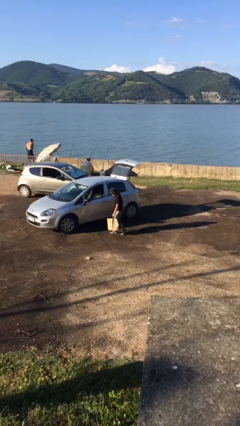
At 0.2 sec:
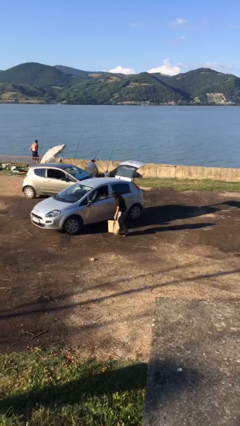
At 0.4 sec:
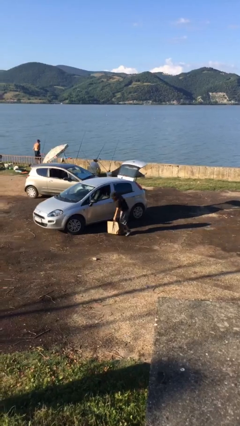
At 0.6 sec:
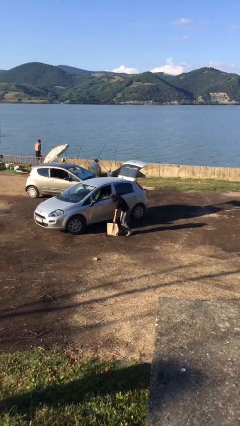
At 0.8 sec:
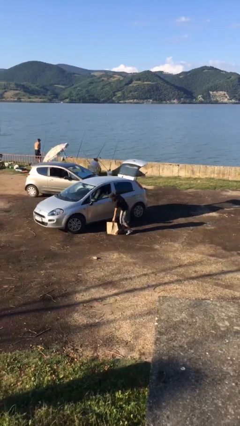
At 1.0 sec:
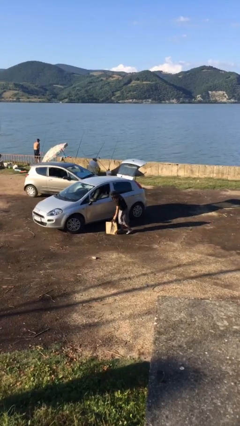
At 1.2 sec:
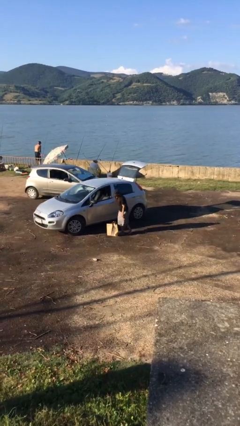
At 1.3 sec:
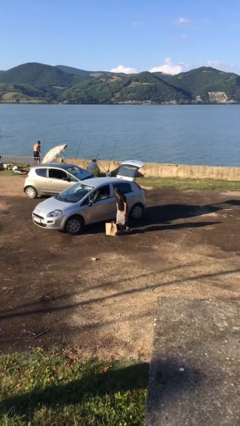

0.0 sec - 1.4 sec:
person puts down object on floor

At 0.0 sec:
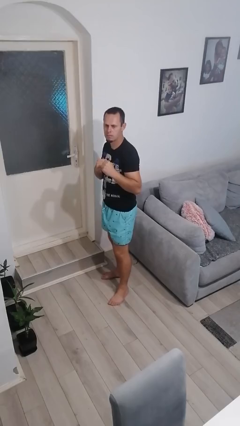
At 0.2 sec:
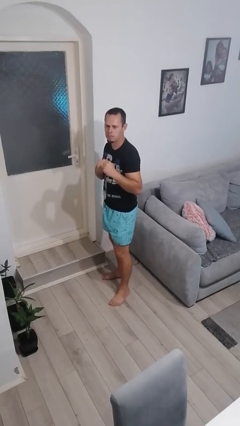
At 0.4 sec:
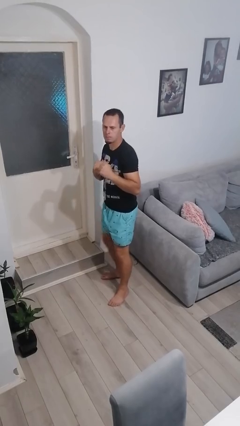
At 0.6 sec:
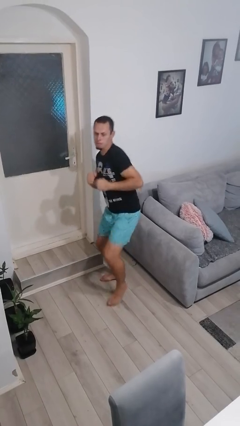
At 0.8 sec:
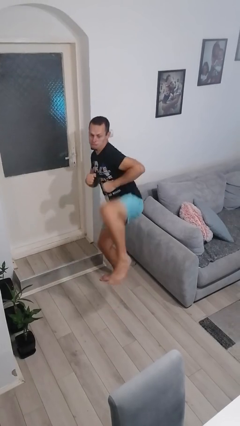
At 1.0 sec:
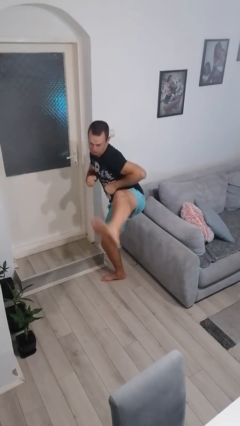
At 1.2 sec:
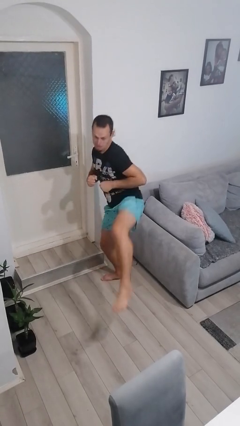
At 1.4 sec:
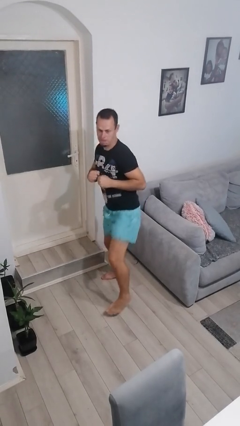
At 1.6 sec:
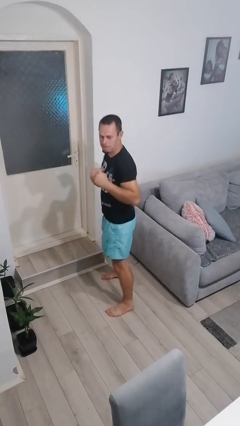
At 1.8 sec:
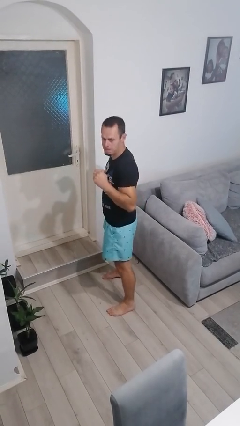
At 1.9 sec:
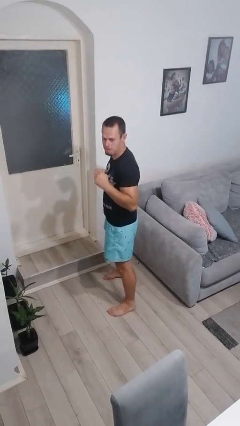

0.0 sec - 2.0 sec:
person karate kicks

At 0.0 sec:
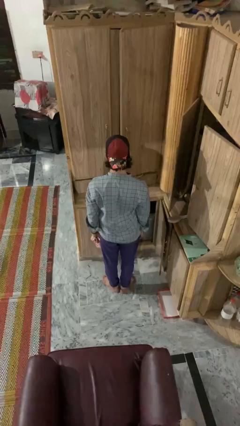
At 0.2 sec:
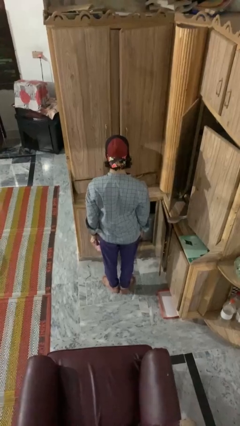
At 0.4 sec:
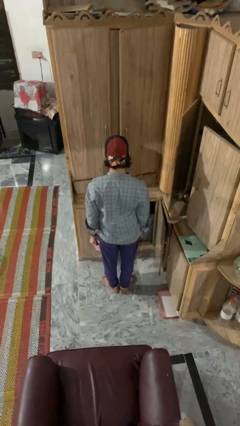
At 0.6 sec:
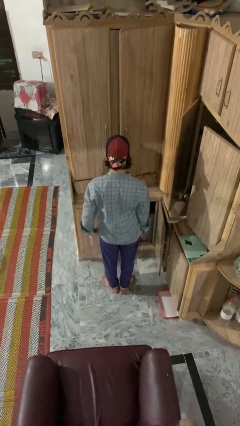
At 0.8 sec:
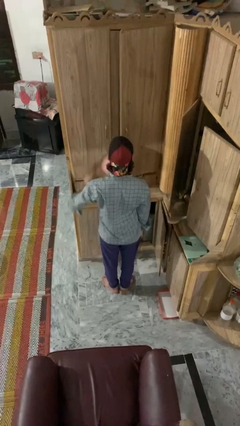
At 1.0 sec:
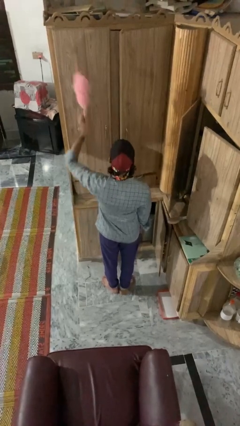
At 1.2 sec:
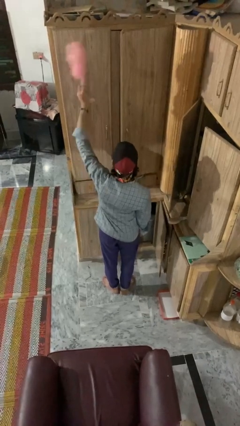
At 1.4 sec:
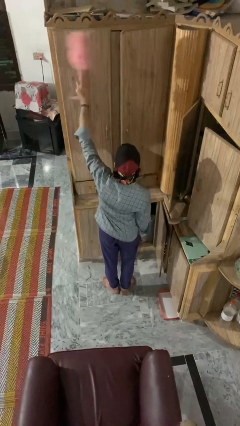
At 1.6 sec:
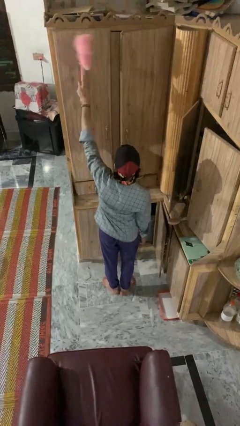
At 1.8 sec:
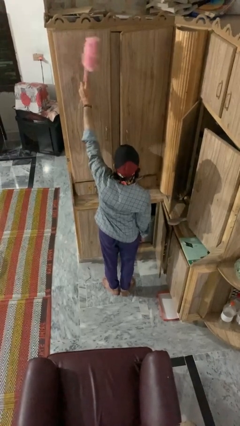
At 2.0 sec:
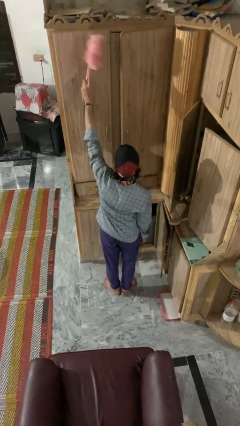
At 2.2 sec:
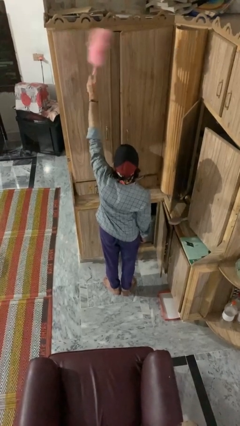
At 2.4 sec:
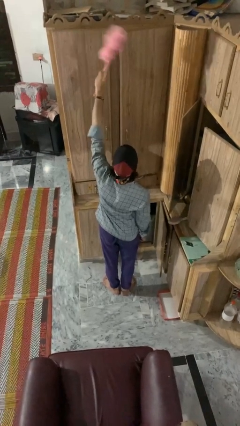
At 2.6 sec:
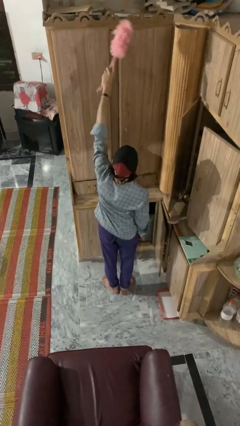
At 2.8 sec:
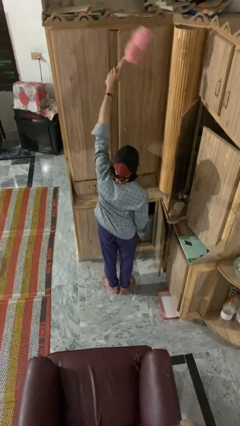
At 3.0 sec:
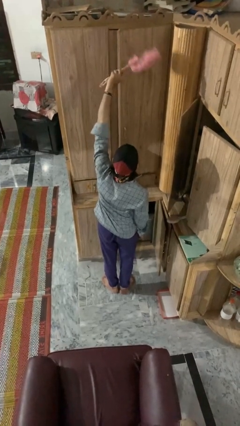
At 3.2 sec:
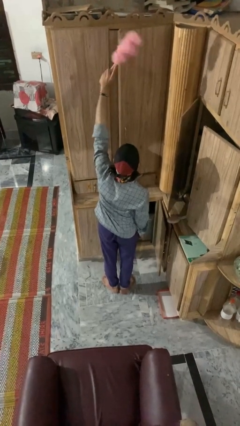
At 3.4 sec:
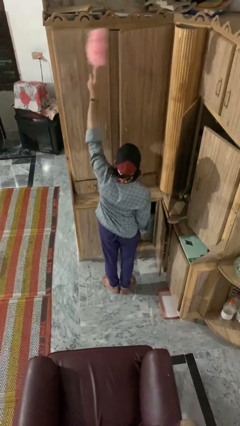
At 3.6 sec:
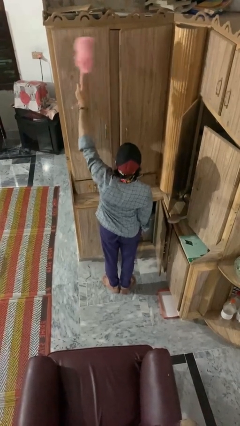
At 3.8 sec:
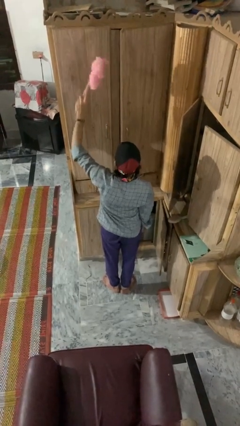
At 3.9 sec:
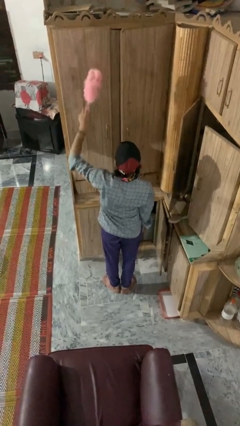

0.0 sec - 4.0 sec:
person dusts furniture

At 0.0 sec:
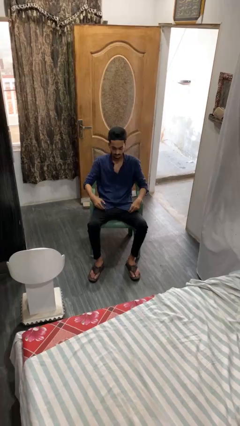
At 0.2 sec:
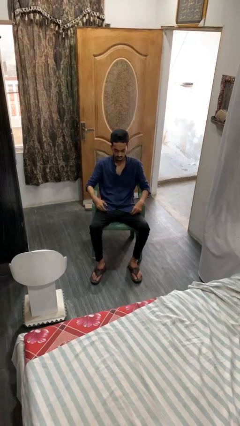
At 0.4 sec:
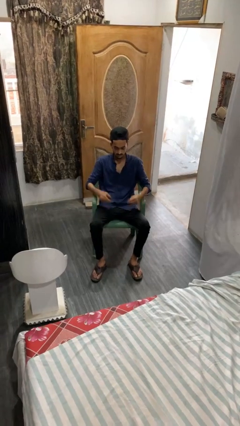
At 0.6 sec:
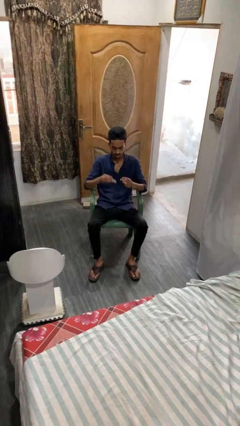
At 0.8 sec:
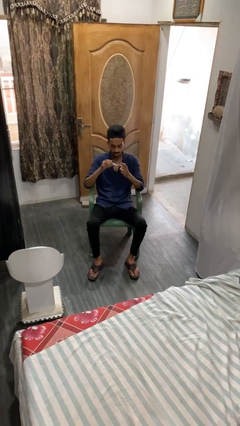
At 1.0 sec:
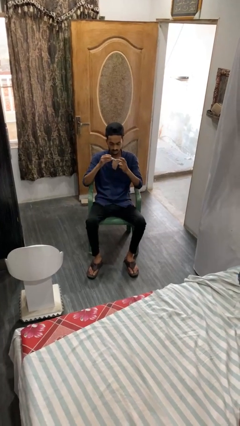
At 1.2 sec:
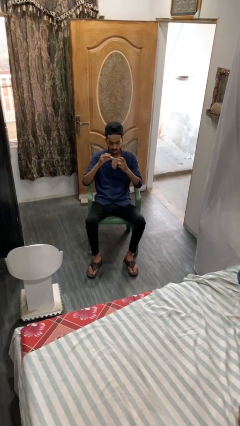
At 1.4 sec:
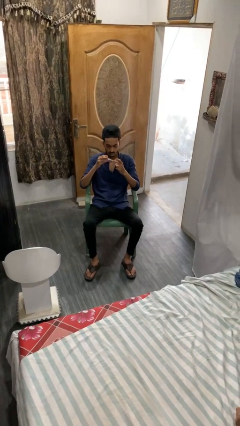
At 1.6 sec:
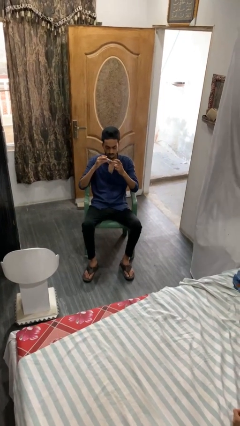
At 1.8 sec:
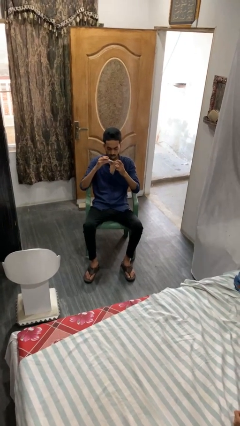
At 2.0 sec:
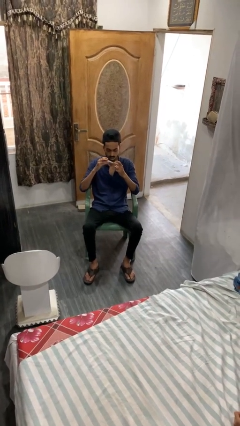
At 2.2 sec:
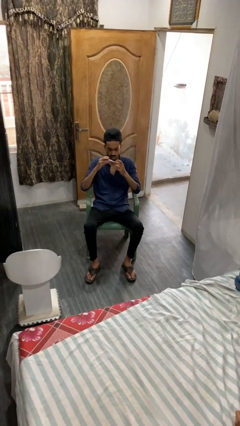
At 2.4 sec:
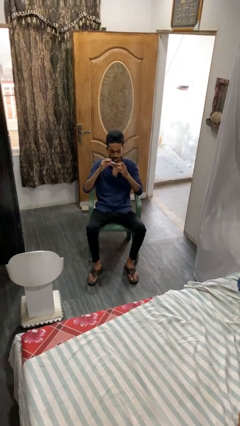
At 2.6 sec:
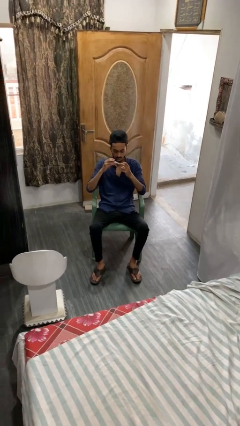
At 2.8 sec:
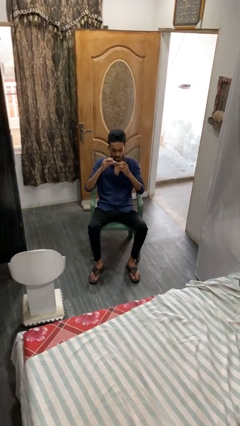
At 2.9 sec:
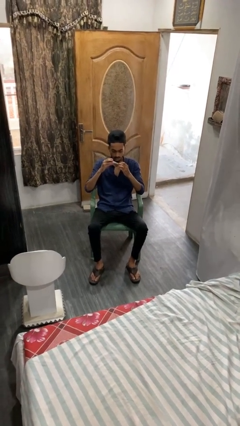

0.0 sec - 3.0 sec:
person clips fingernails

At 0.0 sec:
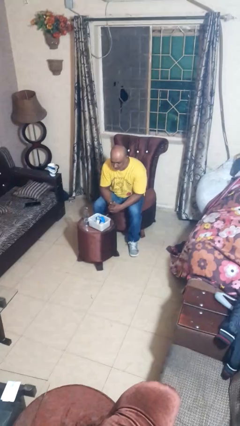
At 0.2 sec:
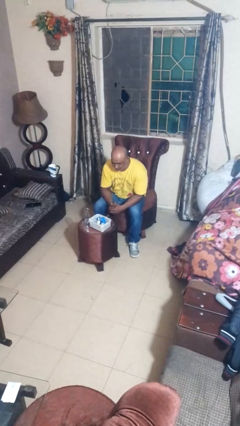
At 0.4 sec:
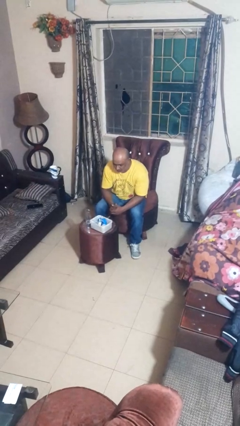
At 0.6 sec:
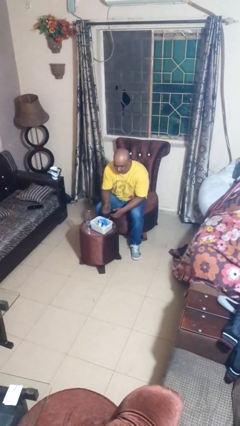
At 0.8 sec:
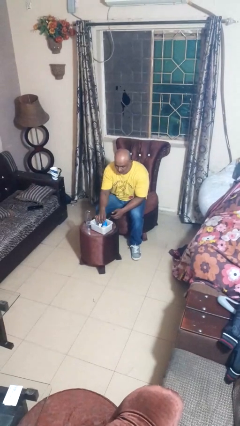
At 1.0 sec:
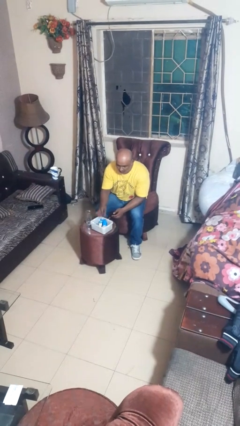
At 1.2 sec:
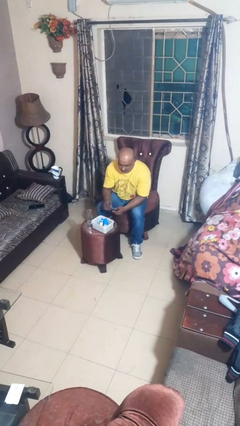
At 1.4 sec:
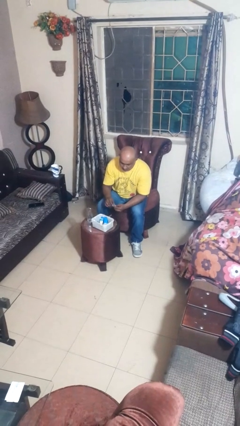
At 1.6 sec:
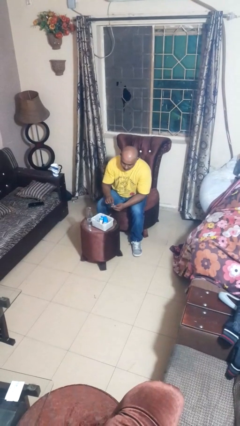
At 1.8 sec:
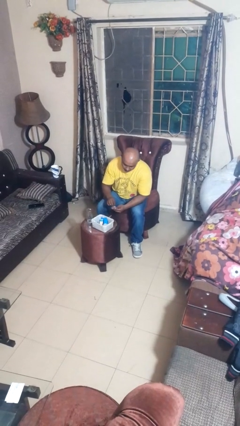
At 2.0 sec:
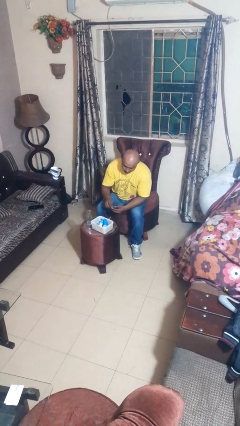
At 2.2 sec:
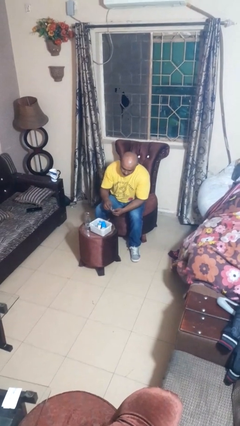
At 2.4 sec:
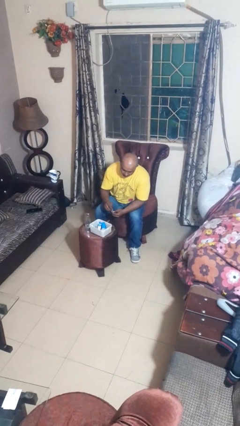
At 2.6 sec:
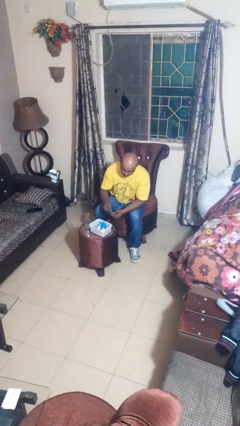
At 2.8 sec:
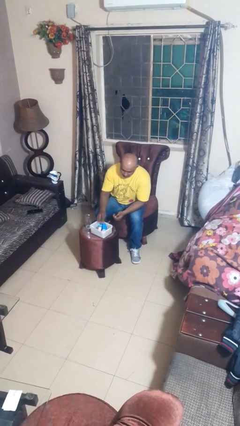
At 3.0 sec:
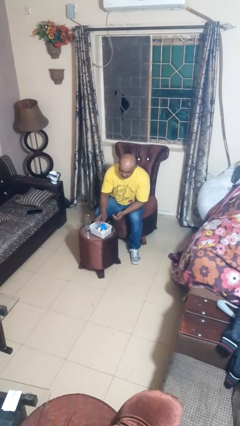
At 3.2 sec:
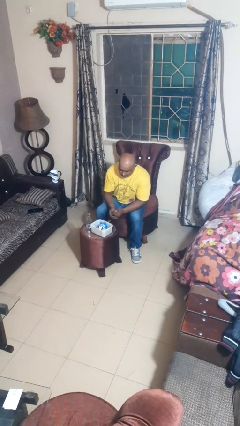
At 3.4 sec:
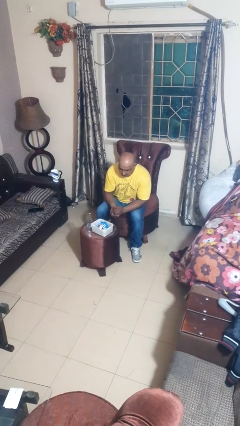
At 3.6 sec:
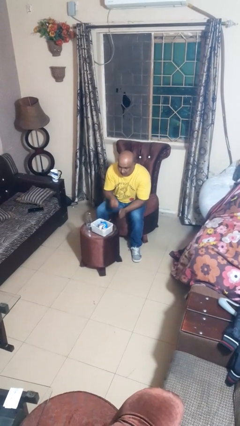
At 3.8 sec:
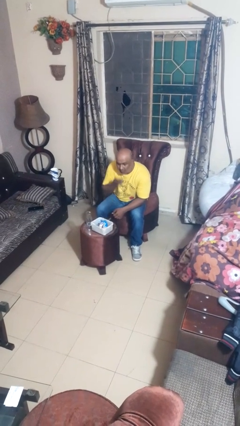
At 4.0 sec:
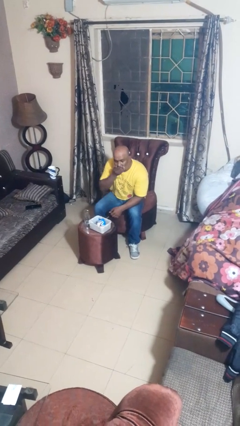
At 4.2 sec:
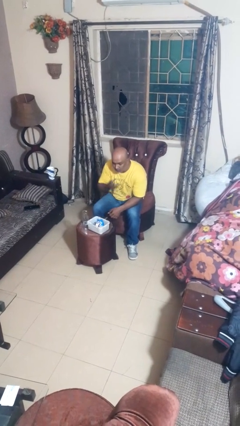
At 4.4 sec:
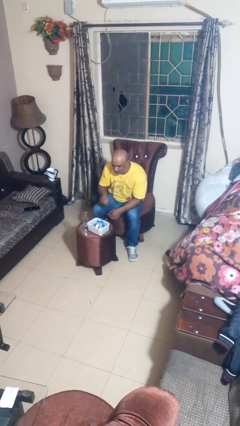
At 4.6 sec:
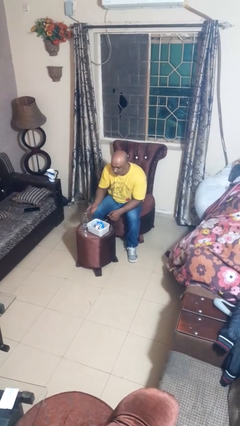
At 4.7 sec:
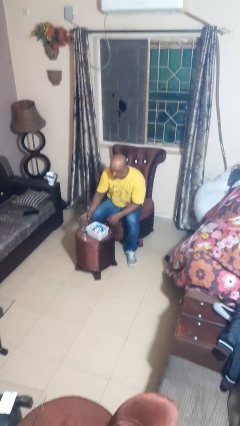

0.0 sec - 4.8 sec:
person takes medicine pills

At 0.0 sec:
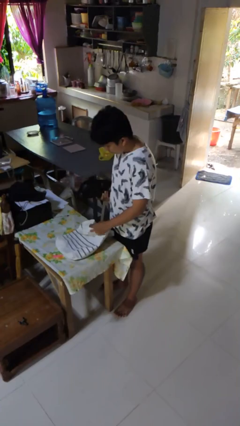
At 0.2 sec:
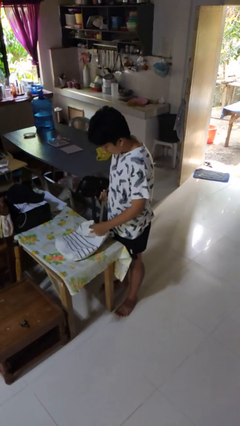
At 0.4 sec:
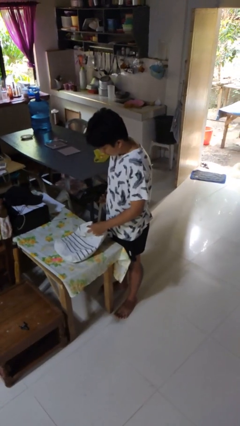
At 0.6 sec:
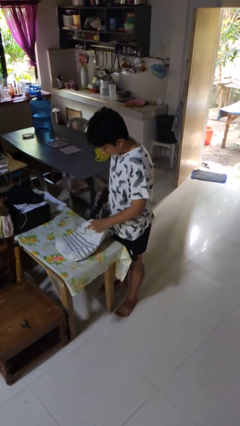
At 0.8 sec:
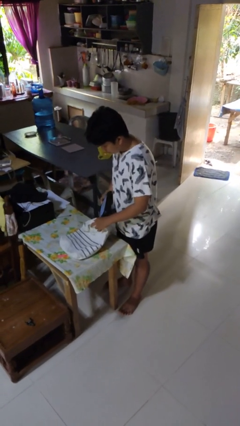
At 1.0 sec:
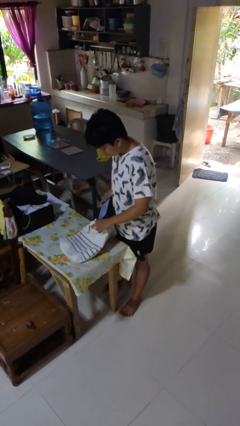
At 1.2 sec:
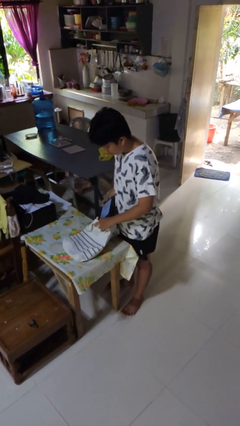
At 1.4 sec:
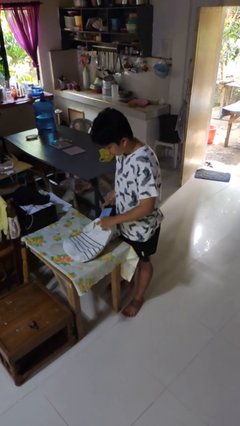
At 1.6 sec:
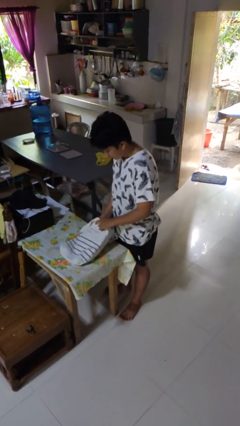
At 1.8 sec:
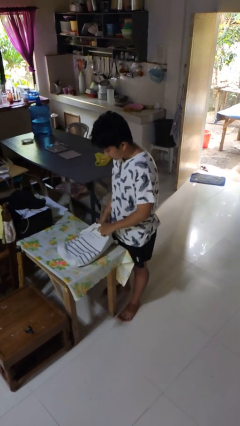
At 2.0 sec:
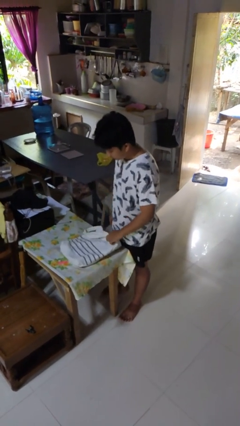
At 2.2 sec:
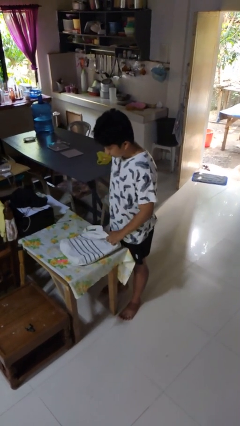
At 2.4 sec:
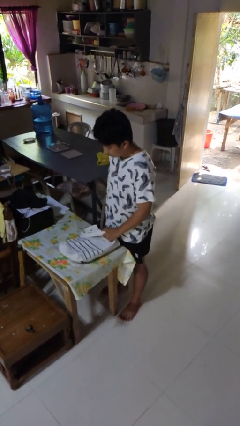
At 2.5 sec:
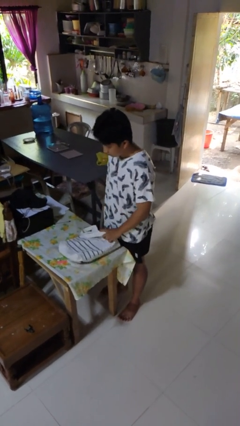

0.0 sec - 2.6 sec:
person puts object into bag
